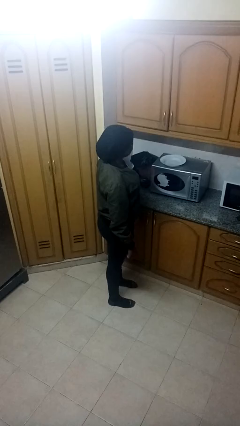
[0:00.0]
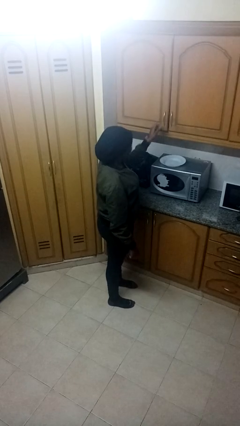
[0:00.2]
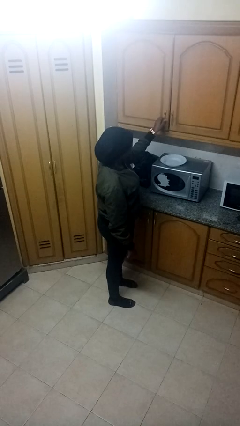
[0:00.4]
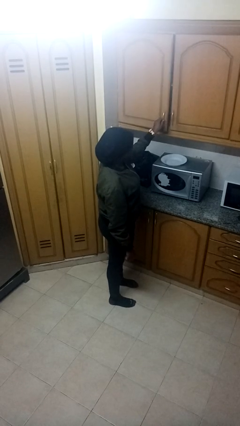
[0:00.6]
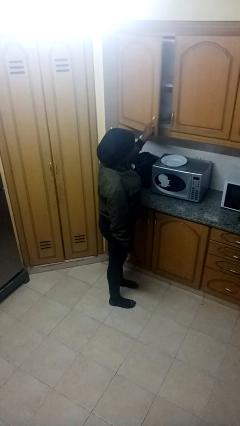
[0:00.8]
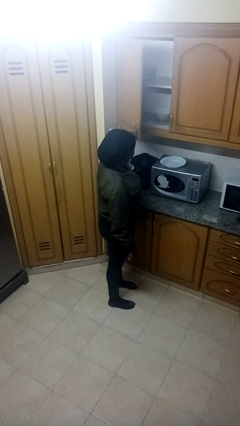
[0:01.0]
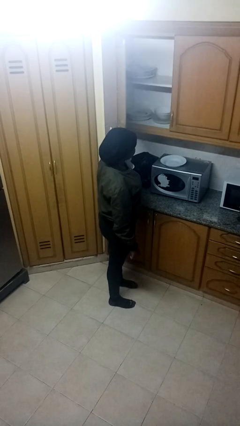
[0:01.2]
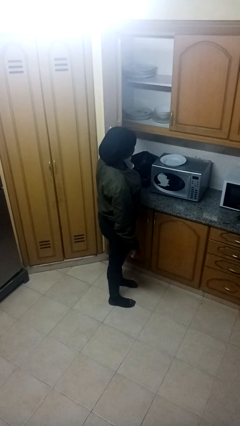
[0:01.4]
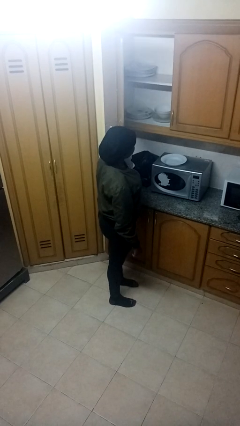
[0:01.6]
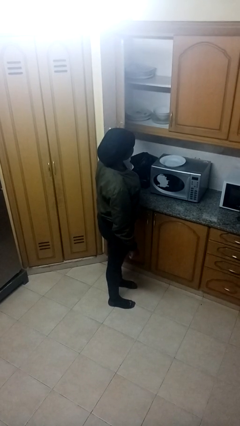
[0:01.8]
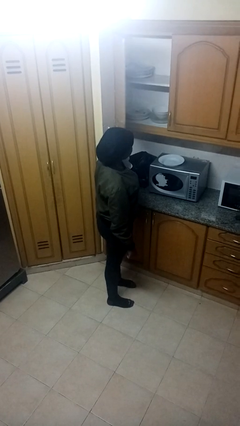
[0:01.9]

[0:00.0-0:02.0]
person opens cabinet

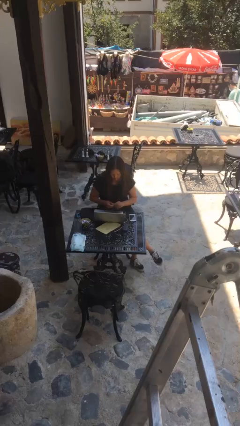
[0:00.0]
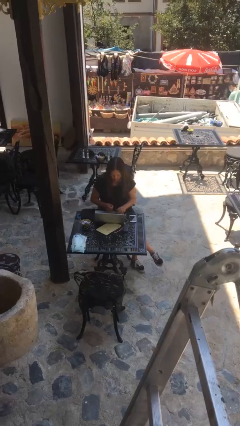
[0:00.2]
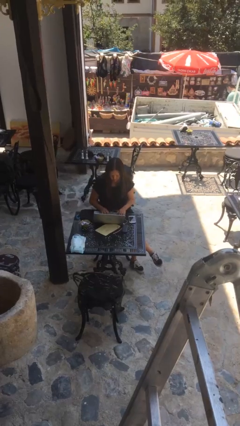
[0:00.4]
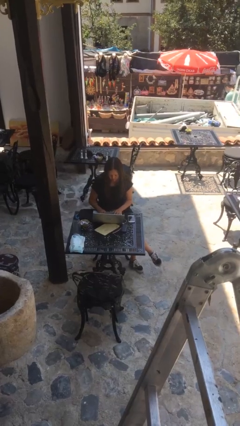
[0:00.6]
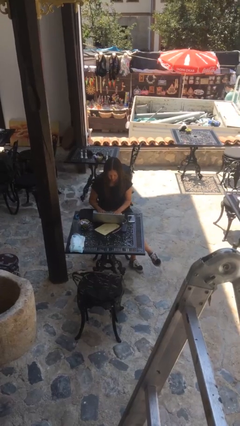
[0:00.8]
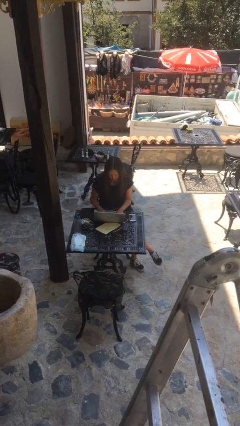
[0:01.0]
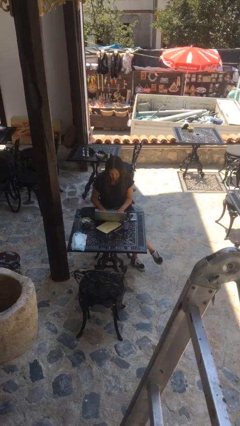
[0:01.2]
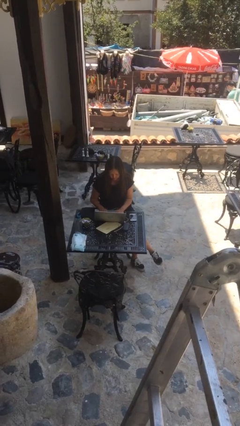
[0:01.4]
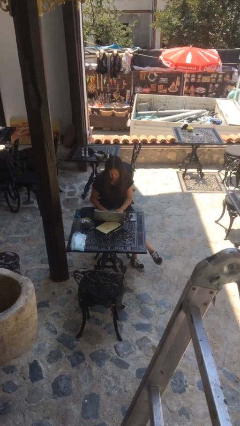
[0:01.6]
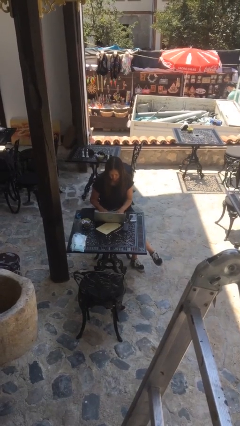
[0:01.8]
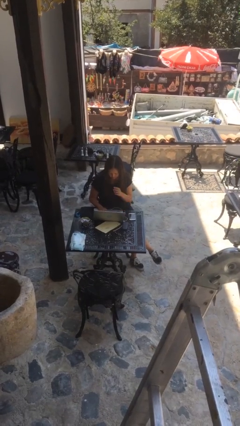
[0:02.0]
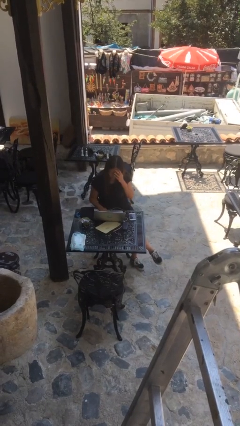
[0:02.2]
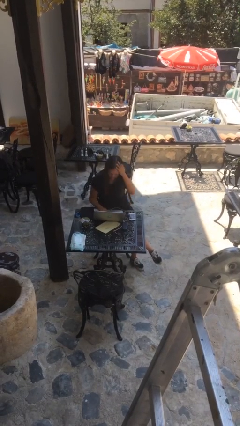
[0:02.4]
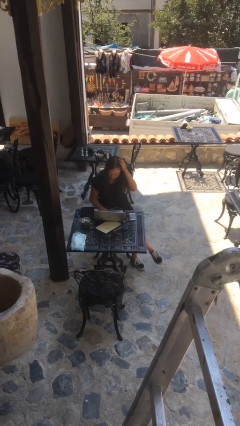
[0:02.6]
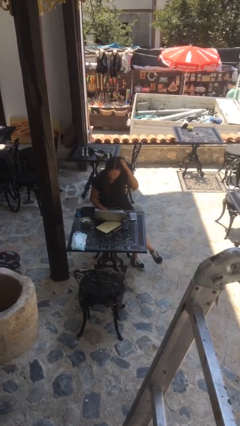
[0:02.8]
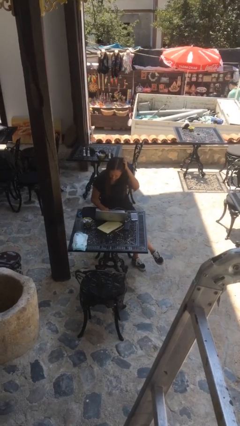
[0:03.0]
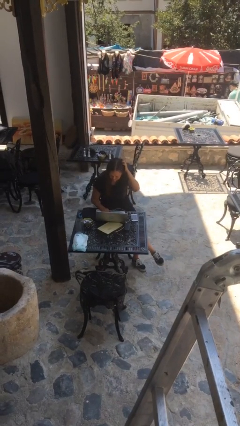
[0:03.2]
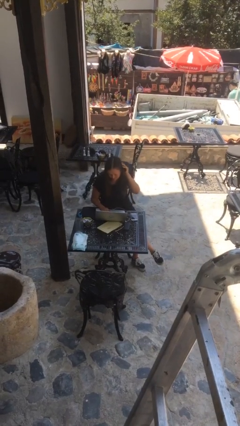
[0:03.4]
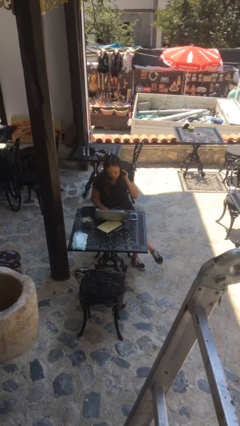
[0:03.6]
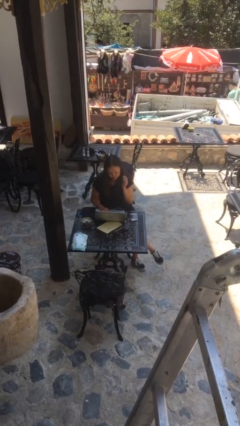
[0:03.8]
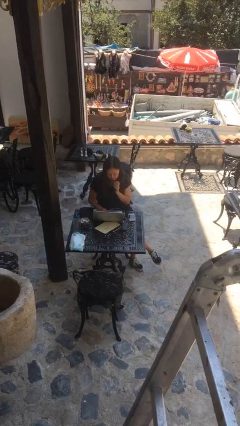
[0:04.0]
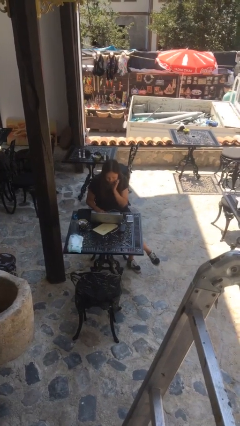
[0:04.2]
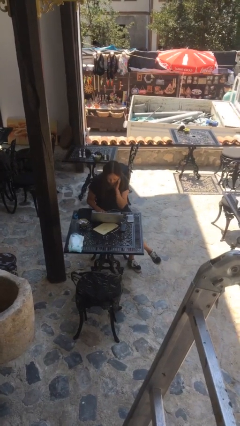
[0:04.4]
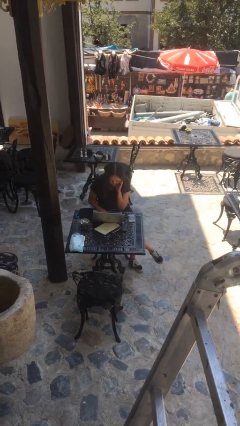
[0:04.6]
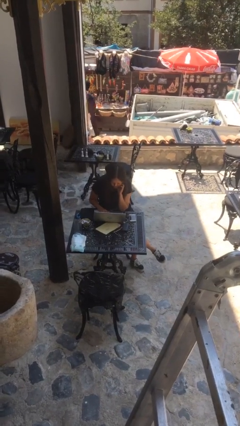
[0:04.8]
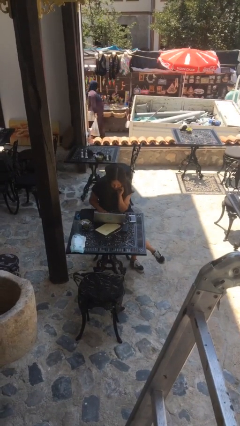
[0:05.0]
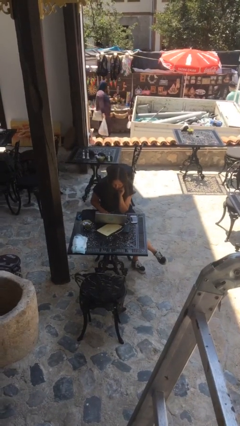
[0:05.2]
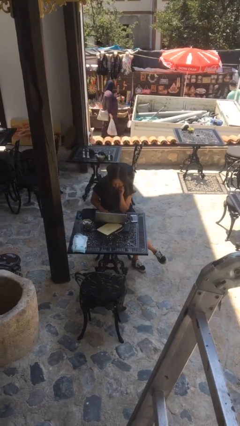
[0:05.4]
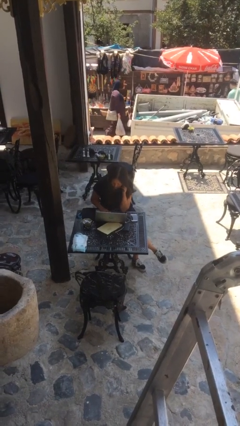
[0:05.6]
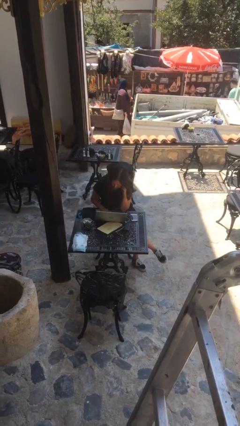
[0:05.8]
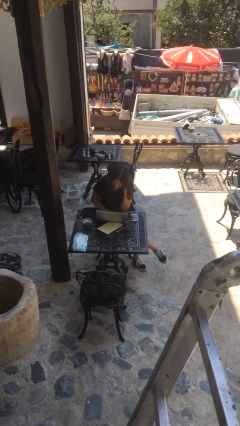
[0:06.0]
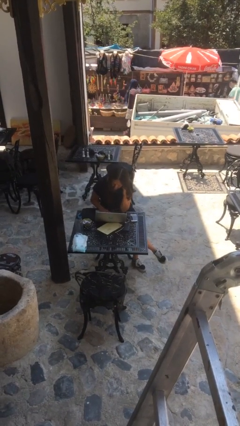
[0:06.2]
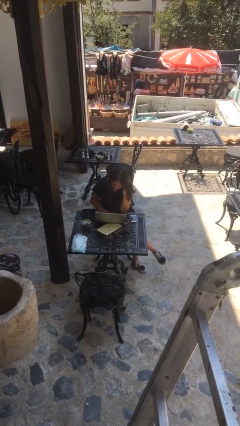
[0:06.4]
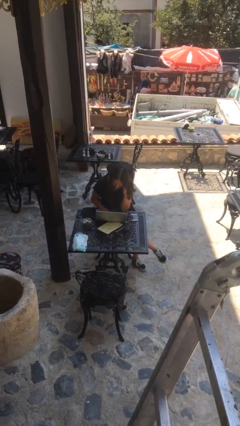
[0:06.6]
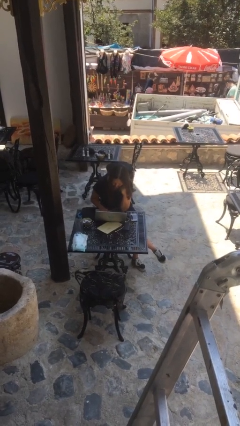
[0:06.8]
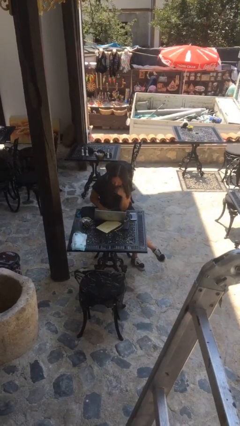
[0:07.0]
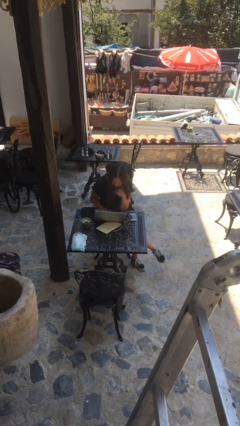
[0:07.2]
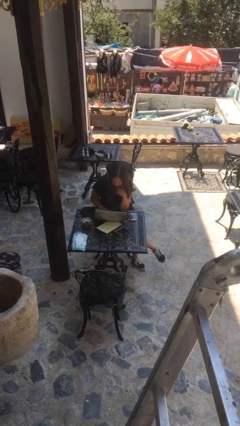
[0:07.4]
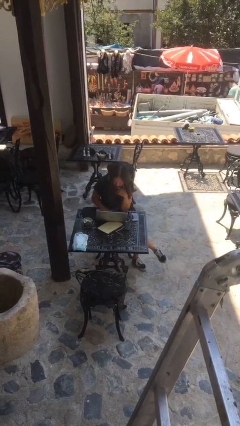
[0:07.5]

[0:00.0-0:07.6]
person interacts with laptop

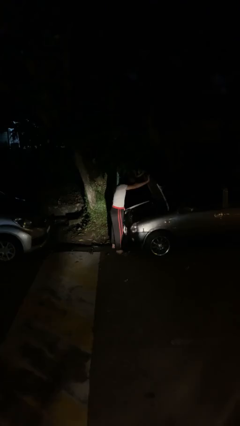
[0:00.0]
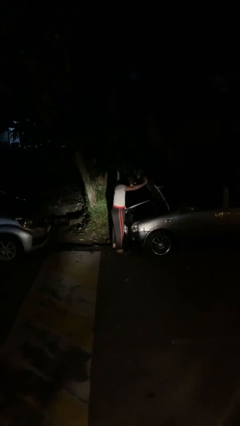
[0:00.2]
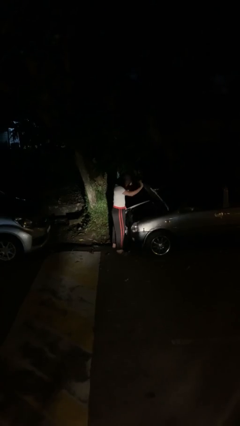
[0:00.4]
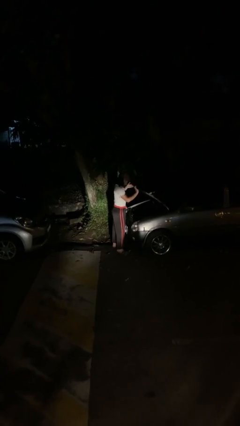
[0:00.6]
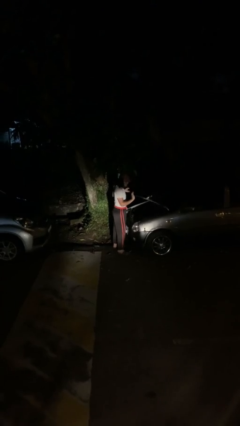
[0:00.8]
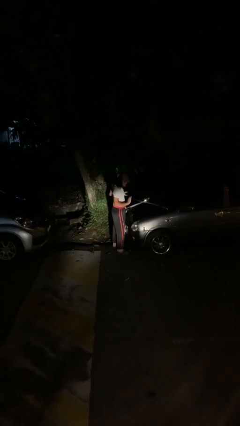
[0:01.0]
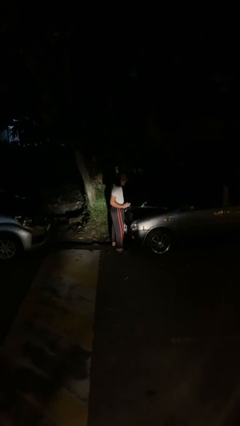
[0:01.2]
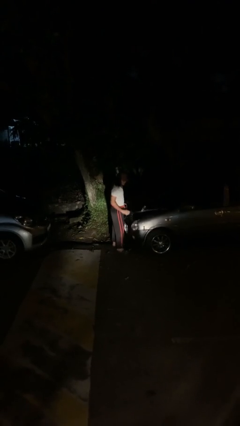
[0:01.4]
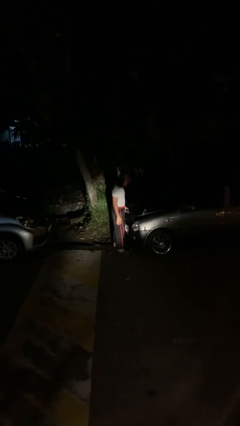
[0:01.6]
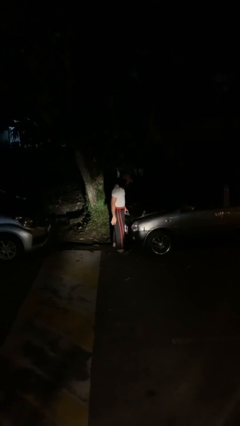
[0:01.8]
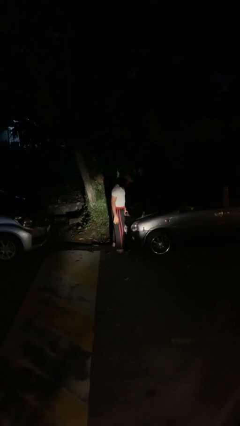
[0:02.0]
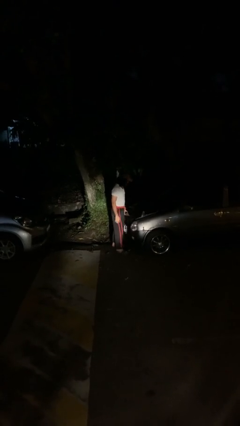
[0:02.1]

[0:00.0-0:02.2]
person closes car hood

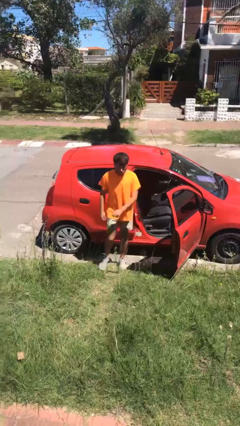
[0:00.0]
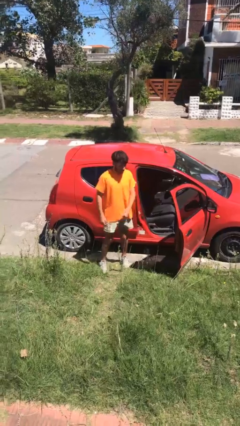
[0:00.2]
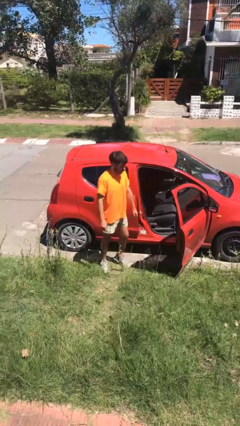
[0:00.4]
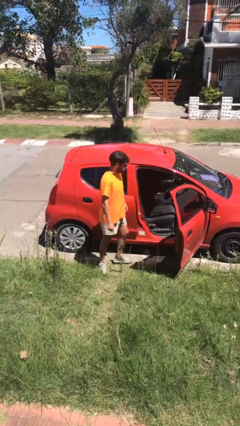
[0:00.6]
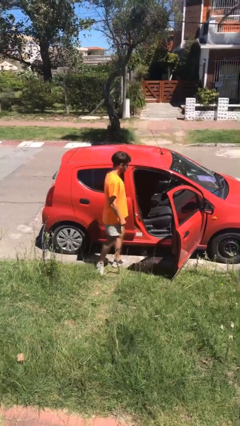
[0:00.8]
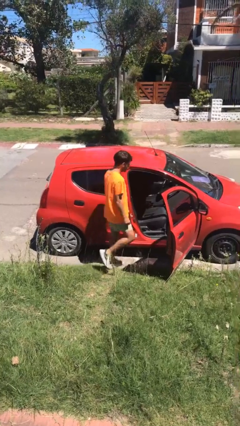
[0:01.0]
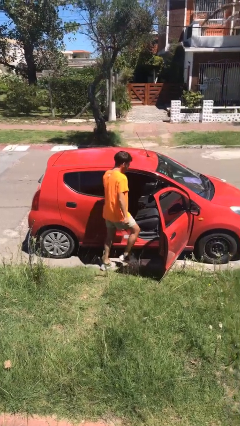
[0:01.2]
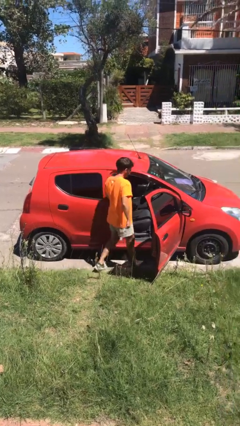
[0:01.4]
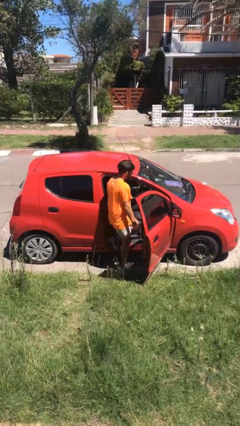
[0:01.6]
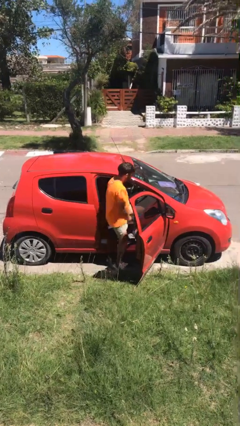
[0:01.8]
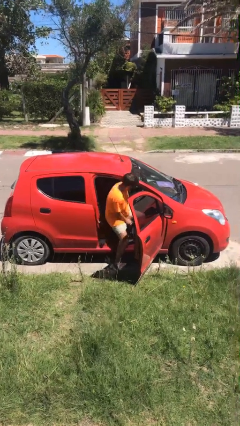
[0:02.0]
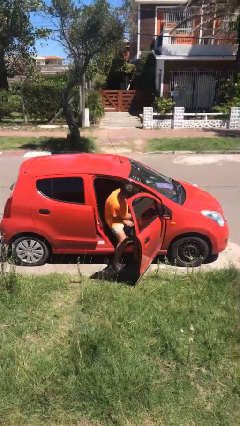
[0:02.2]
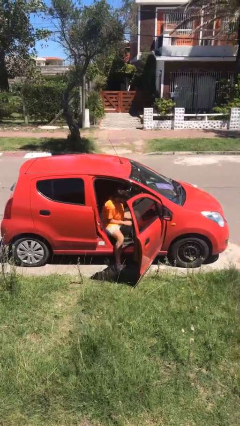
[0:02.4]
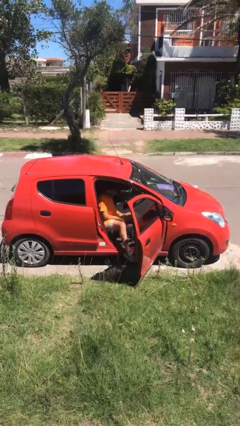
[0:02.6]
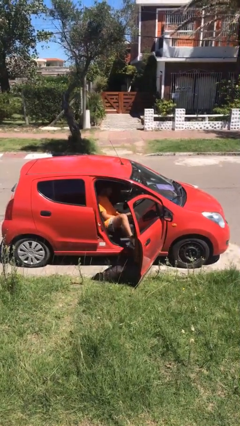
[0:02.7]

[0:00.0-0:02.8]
person enters car

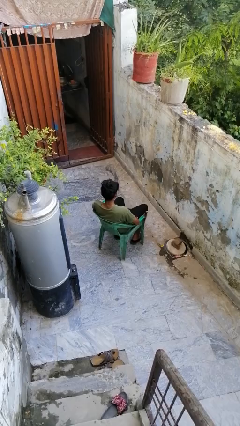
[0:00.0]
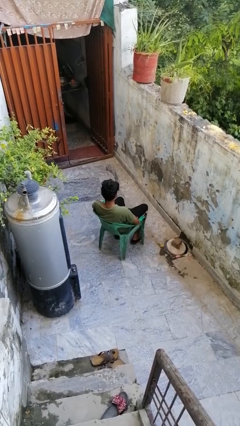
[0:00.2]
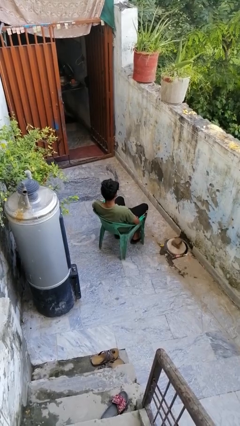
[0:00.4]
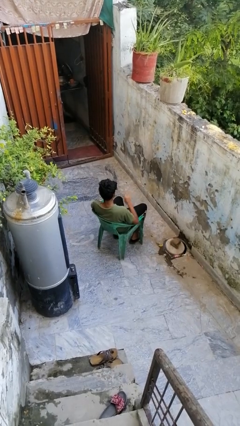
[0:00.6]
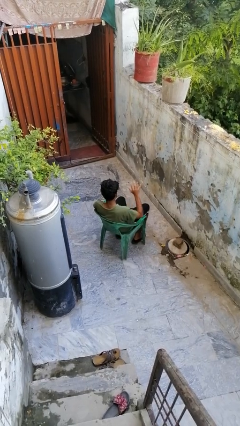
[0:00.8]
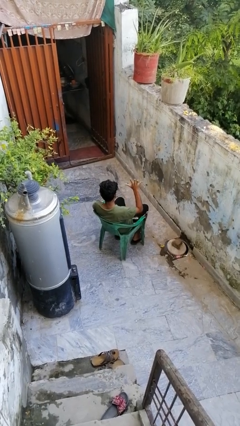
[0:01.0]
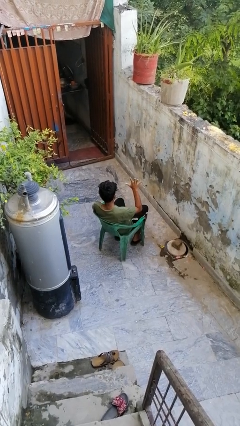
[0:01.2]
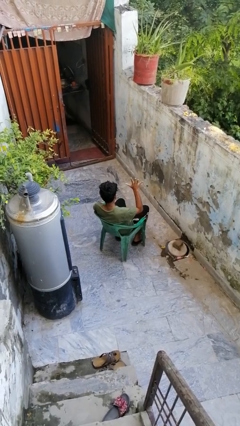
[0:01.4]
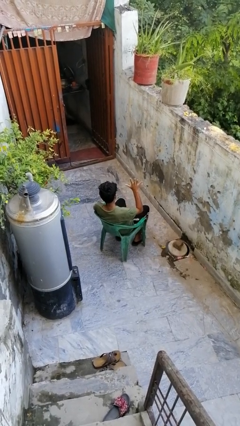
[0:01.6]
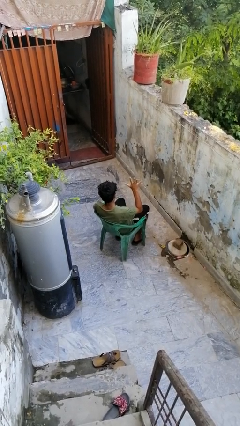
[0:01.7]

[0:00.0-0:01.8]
person gestures number five

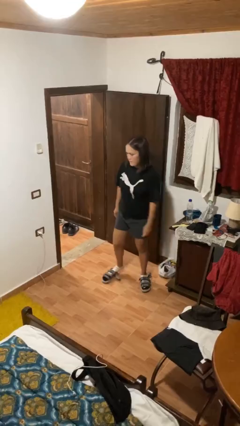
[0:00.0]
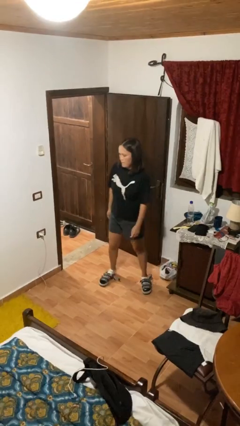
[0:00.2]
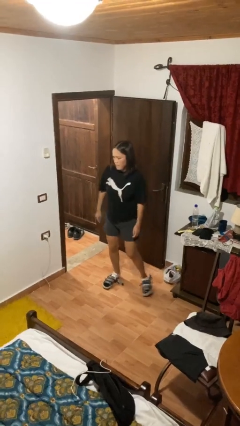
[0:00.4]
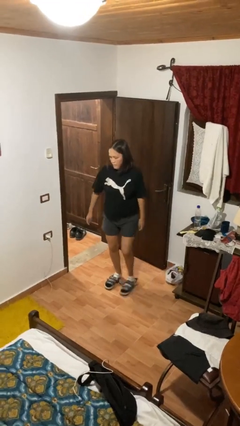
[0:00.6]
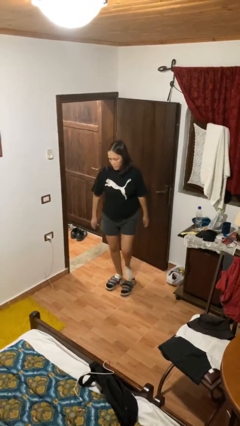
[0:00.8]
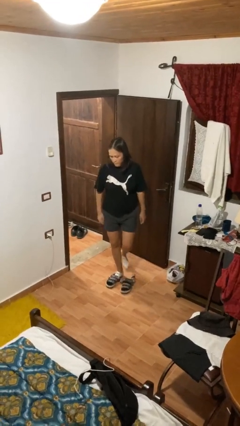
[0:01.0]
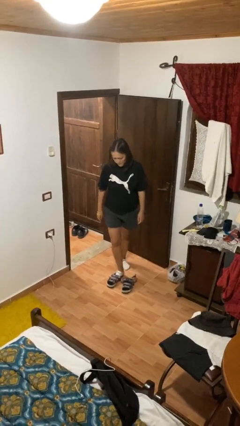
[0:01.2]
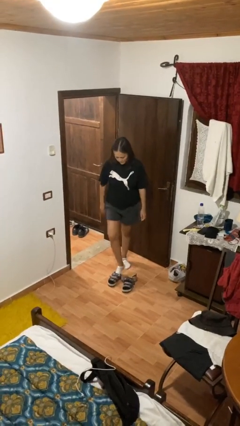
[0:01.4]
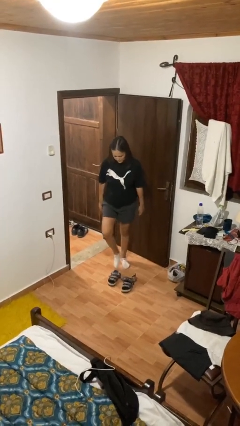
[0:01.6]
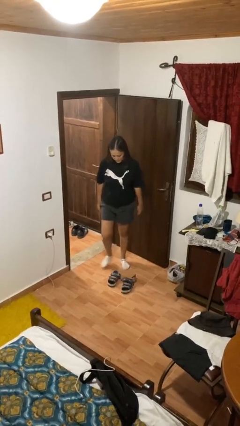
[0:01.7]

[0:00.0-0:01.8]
person takes off shoes
